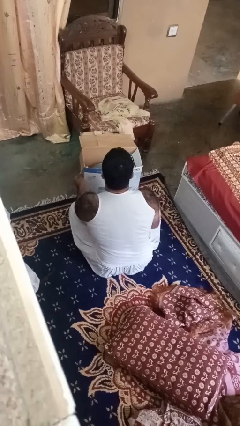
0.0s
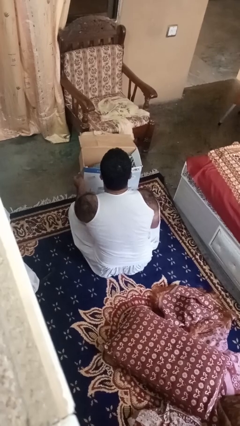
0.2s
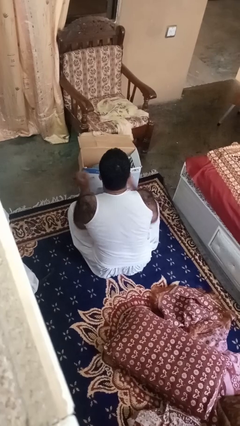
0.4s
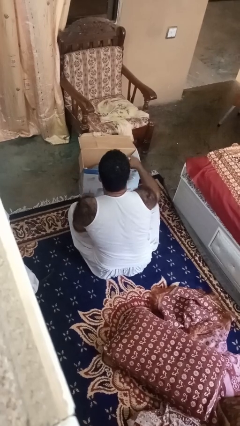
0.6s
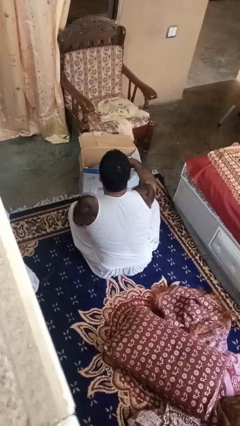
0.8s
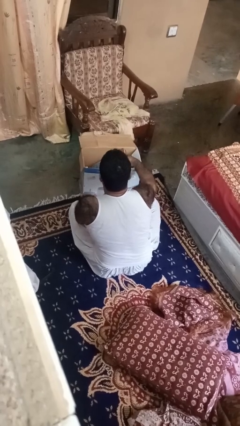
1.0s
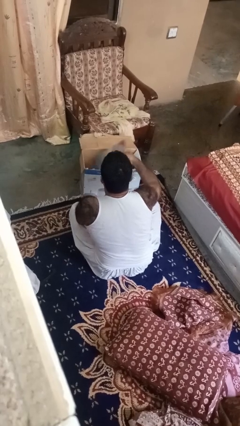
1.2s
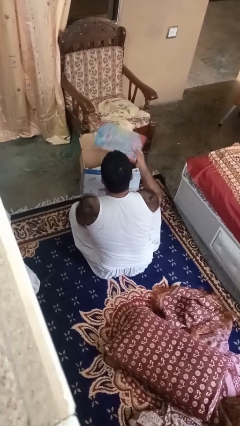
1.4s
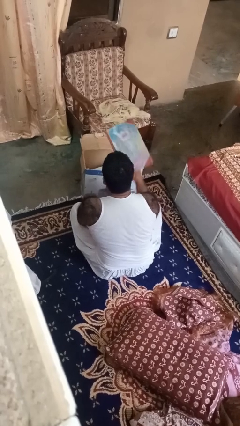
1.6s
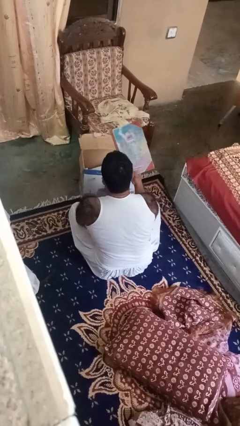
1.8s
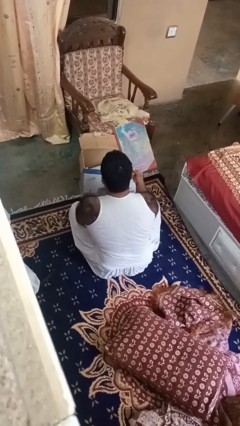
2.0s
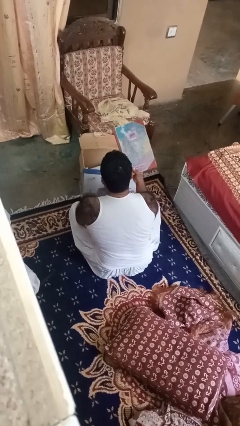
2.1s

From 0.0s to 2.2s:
person takes object from box

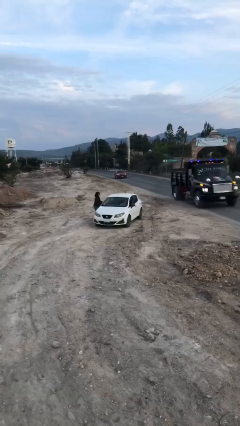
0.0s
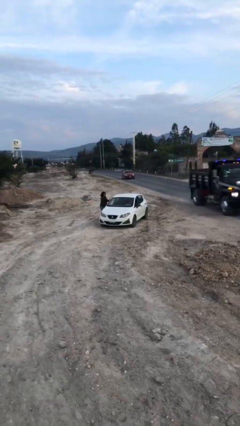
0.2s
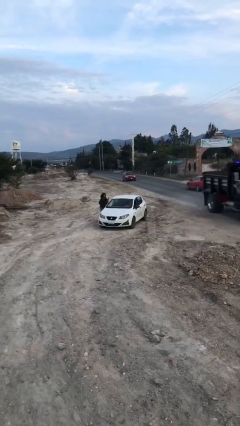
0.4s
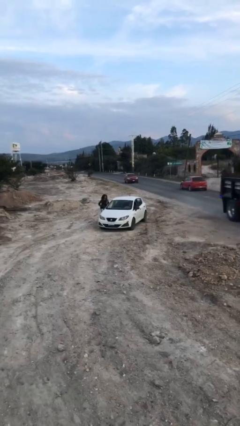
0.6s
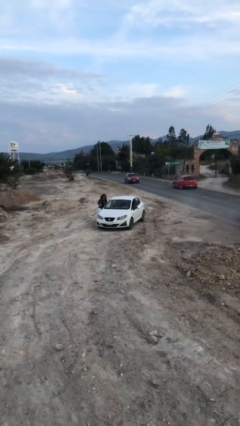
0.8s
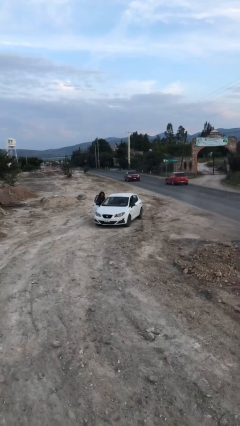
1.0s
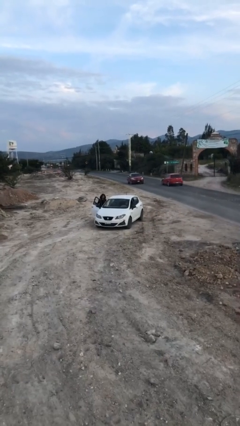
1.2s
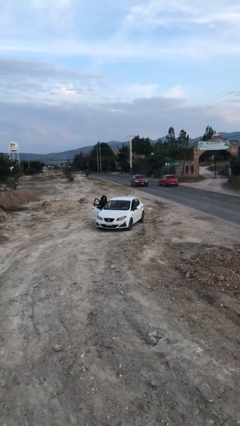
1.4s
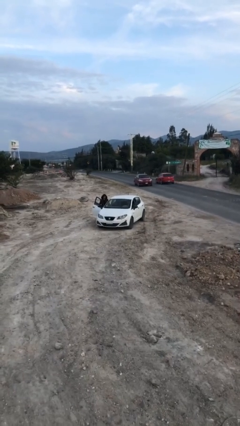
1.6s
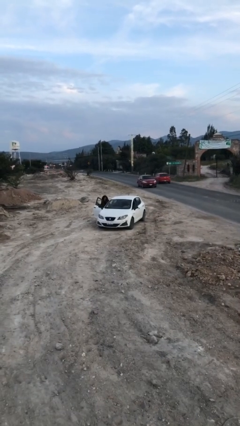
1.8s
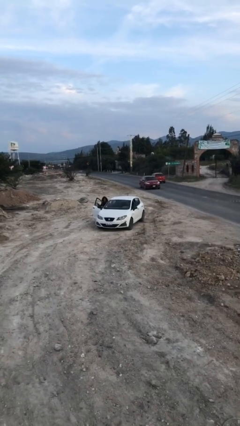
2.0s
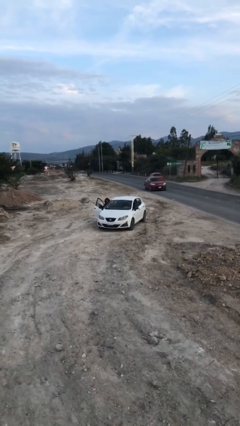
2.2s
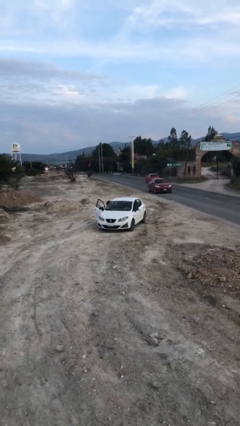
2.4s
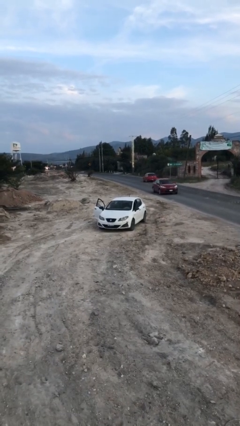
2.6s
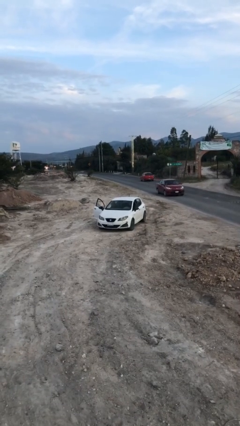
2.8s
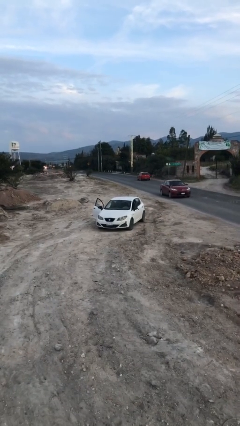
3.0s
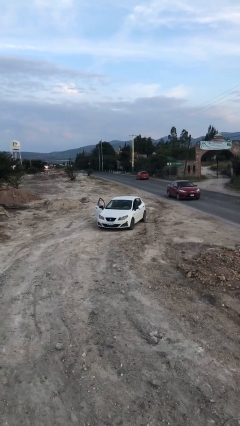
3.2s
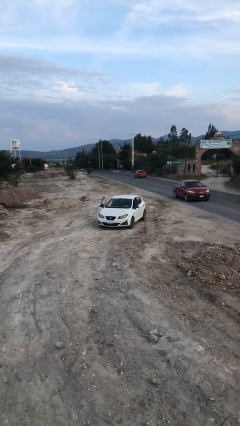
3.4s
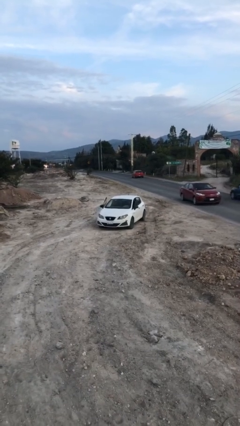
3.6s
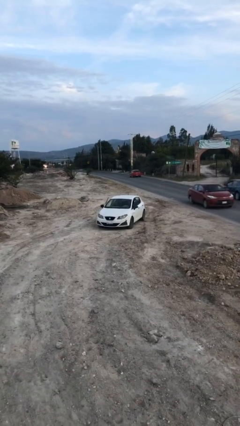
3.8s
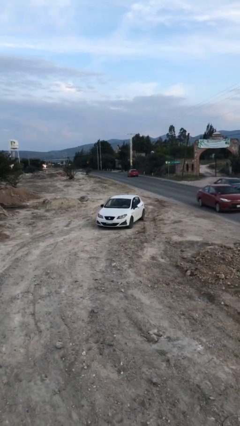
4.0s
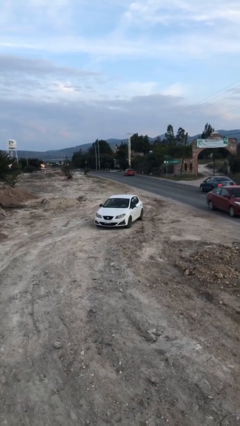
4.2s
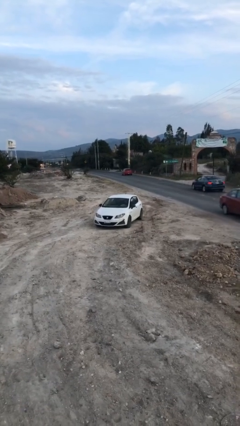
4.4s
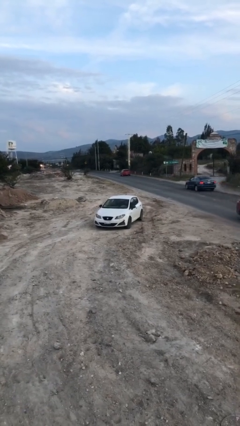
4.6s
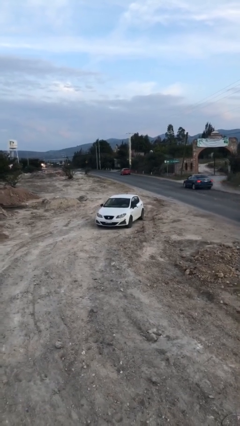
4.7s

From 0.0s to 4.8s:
car picks up person

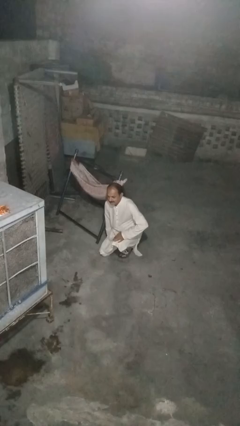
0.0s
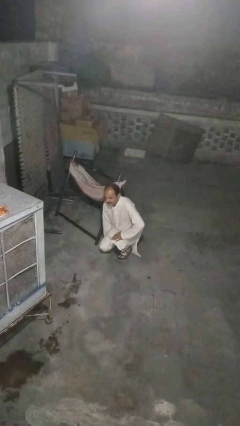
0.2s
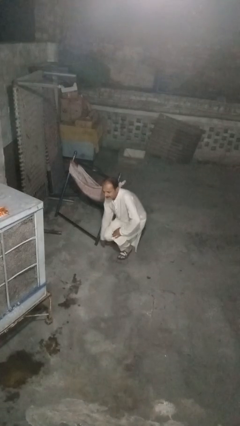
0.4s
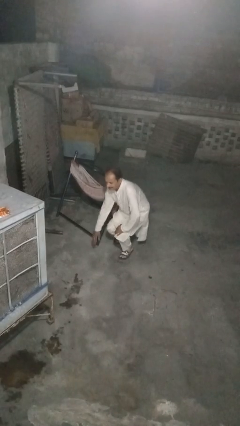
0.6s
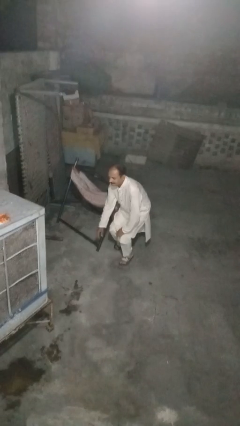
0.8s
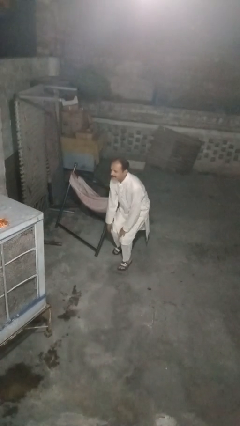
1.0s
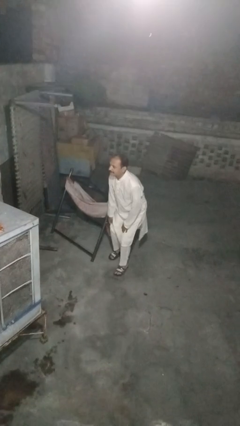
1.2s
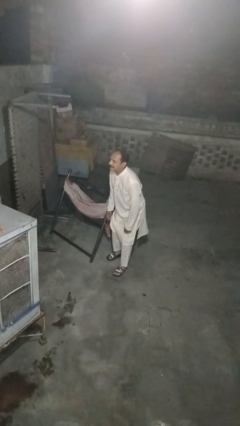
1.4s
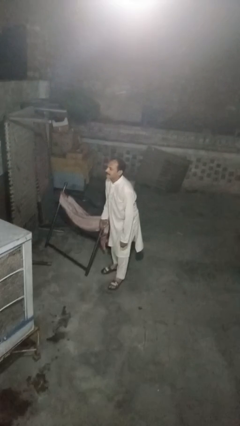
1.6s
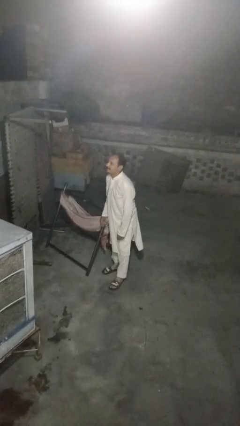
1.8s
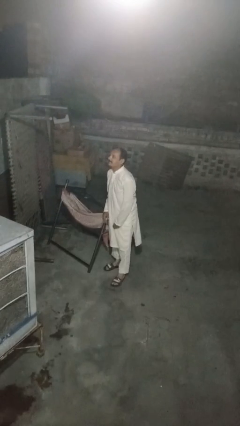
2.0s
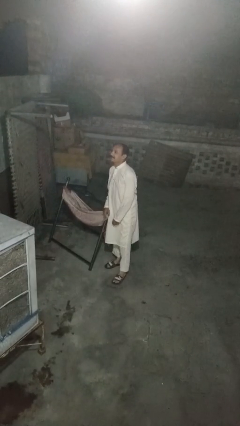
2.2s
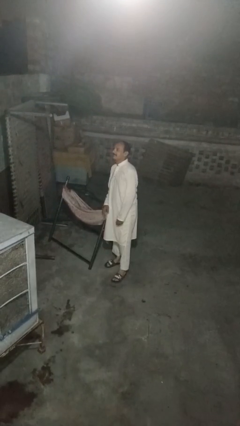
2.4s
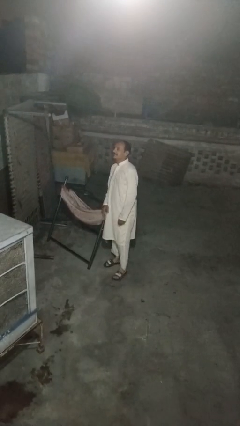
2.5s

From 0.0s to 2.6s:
person stands up from floor

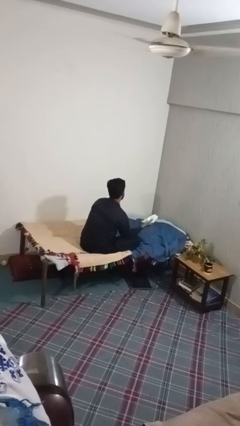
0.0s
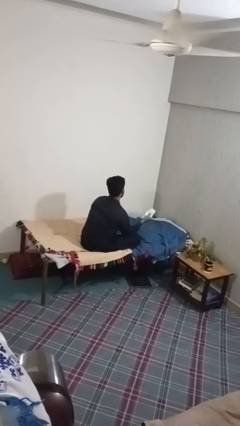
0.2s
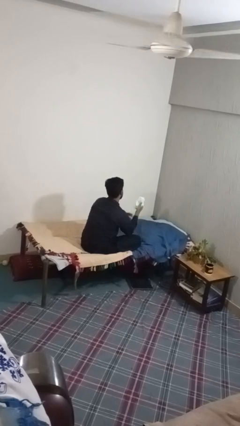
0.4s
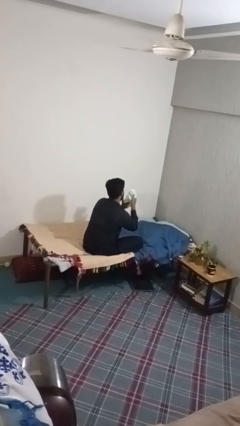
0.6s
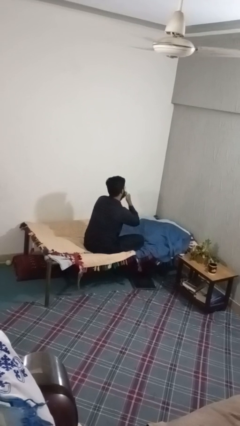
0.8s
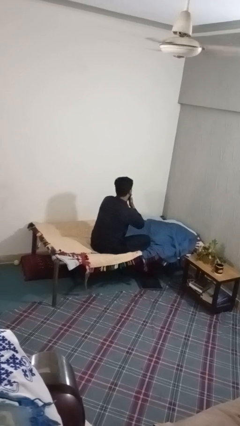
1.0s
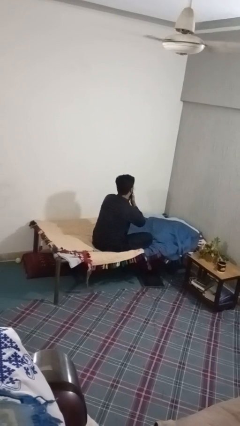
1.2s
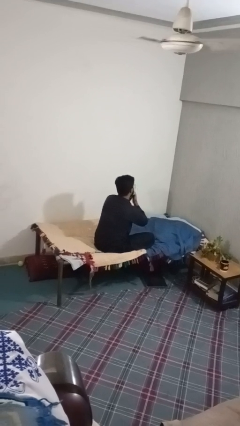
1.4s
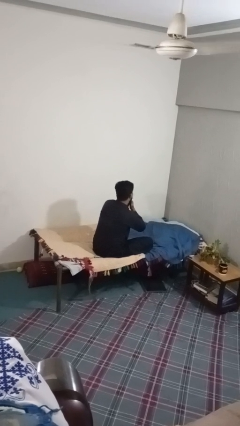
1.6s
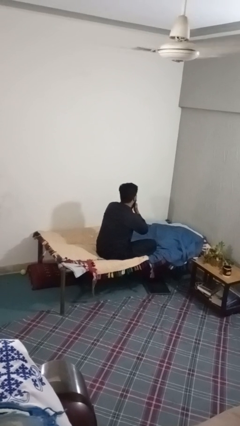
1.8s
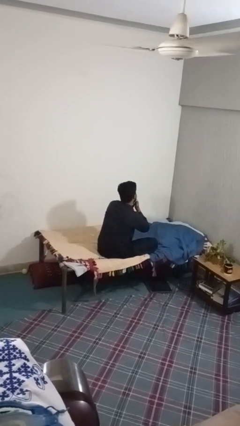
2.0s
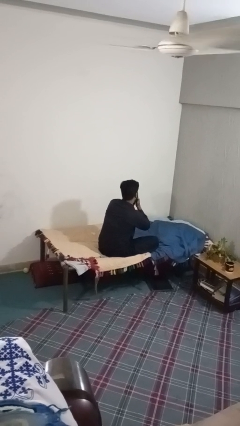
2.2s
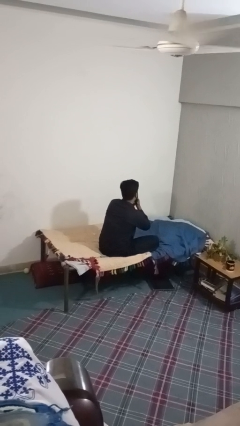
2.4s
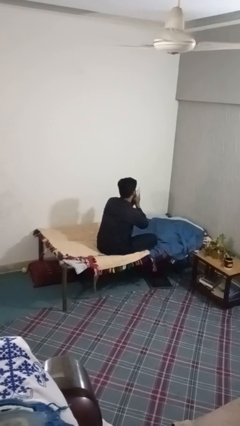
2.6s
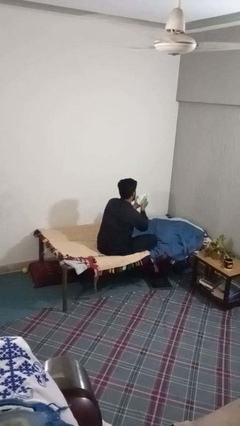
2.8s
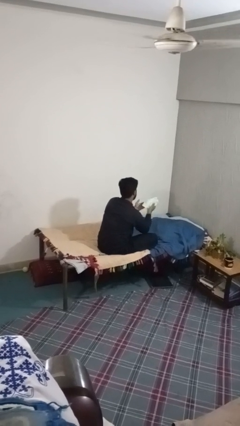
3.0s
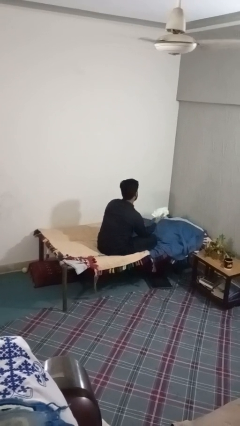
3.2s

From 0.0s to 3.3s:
person blows nose

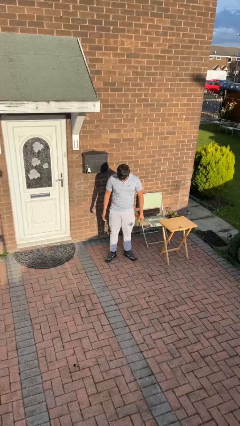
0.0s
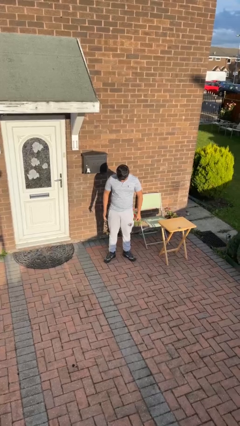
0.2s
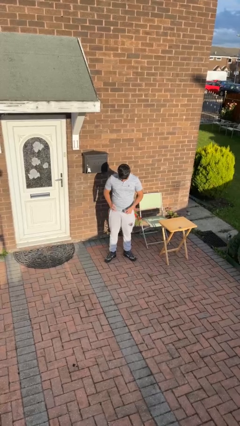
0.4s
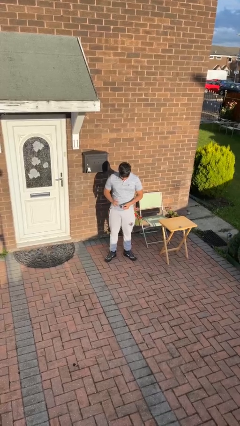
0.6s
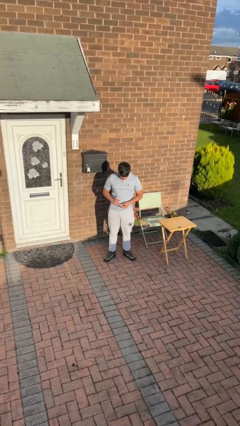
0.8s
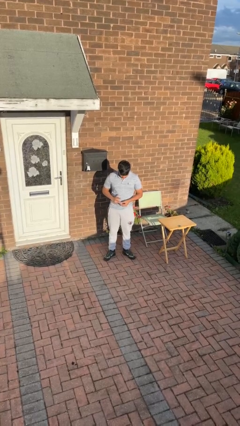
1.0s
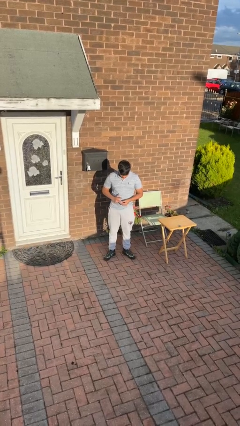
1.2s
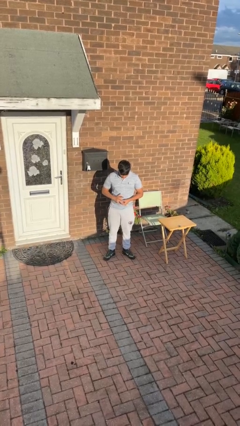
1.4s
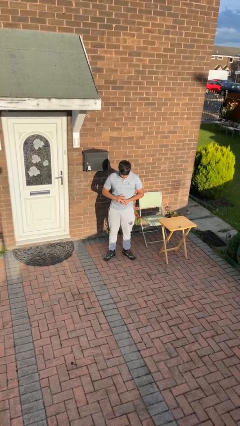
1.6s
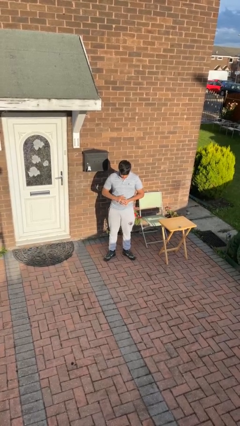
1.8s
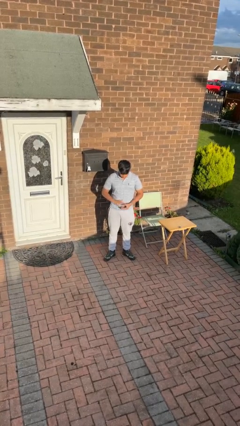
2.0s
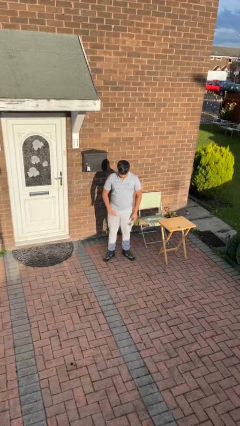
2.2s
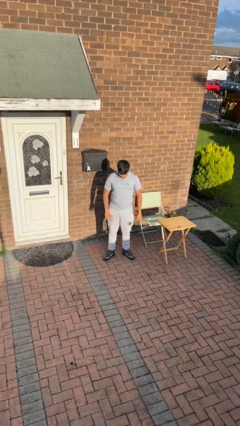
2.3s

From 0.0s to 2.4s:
person puts on ring

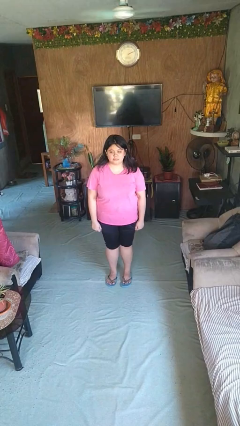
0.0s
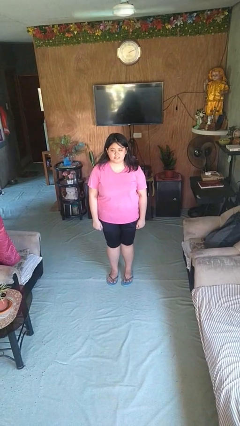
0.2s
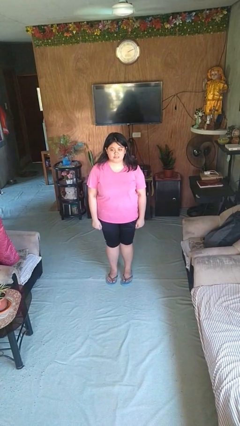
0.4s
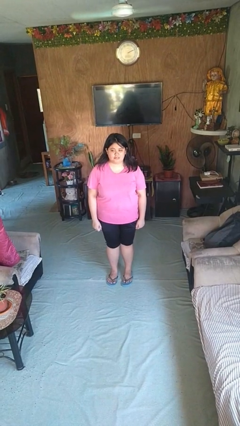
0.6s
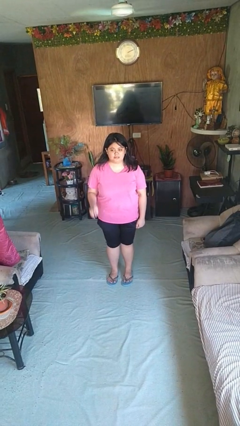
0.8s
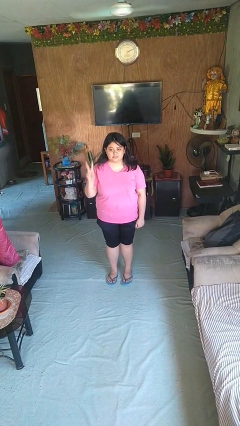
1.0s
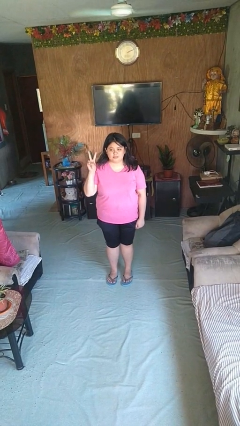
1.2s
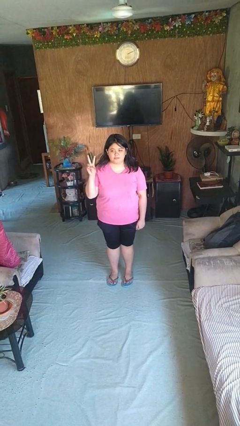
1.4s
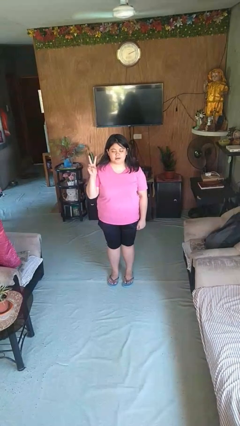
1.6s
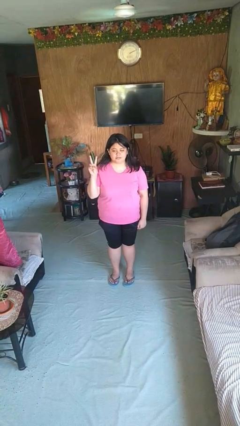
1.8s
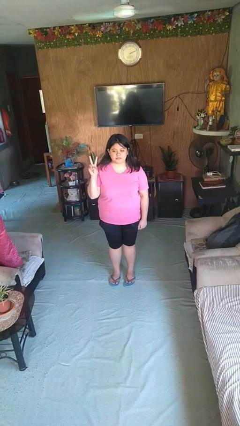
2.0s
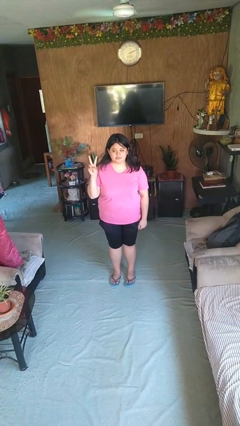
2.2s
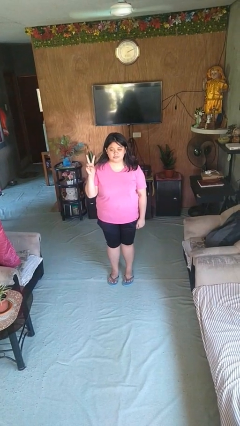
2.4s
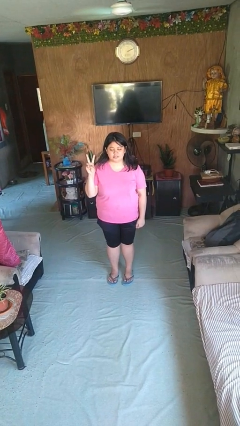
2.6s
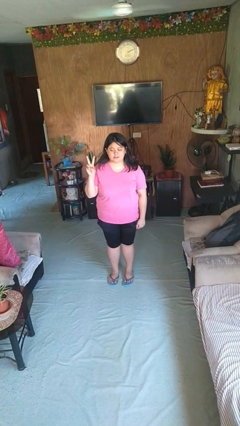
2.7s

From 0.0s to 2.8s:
person gestures peace
